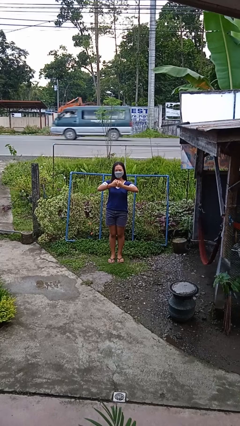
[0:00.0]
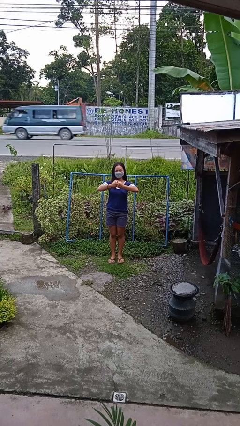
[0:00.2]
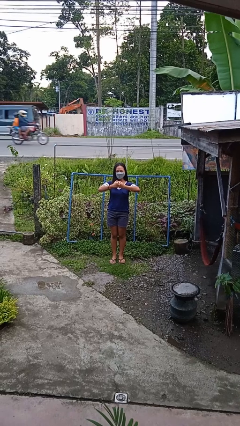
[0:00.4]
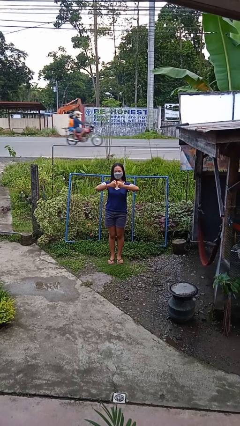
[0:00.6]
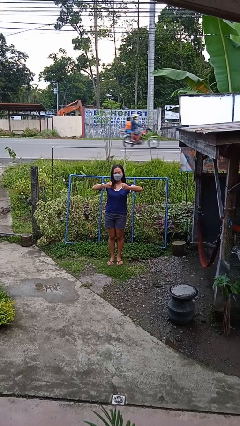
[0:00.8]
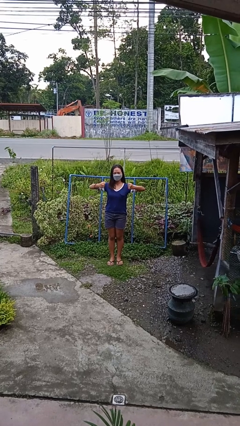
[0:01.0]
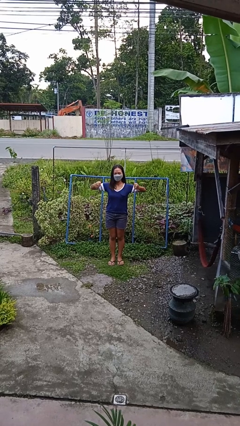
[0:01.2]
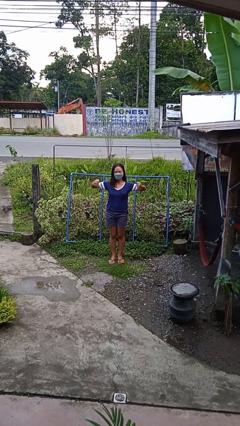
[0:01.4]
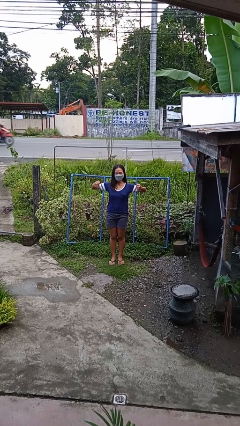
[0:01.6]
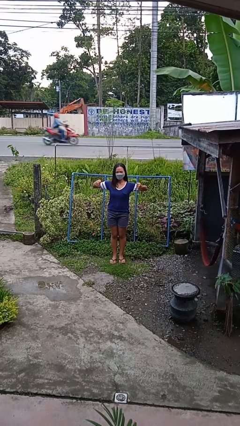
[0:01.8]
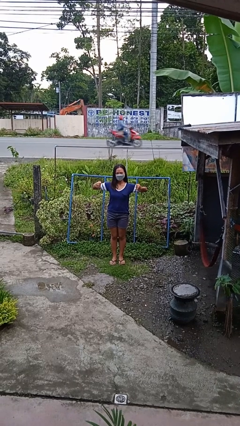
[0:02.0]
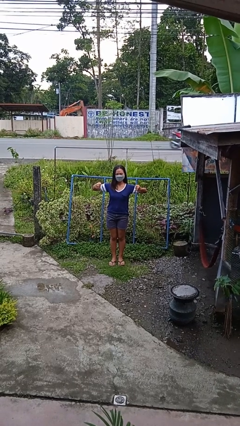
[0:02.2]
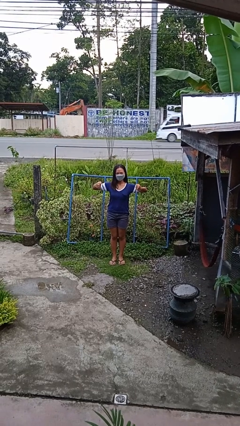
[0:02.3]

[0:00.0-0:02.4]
person gestures zoom in

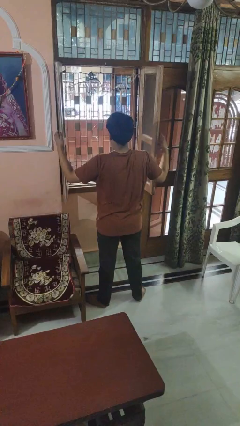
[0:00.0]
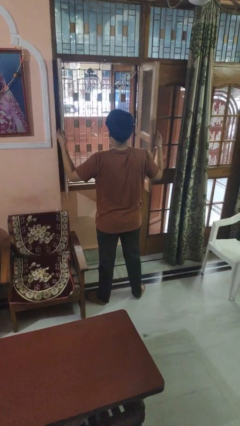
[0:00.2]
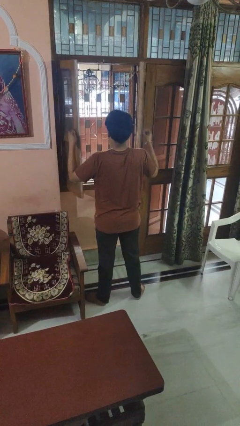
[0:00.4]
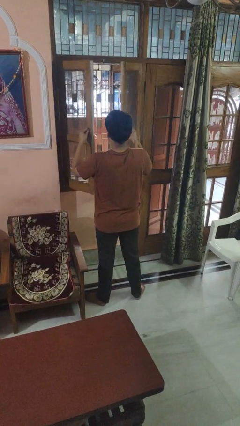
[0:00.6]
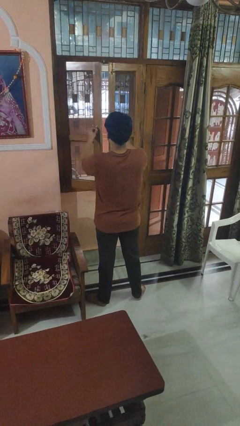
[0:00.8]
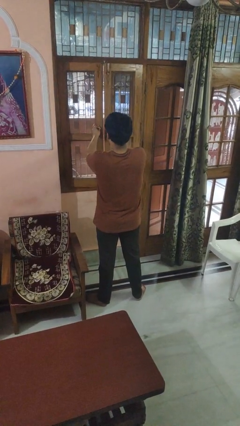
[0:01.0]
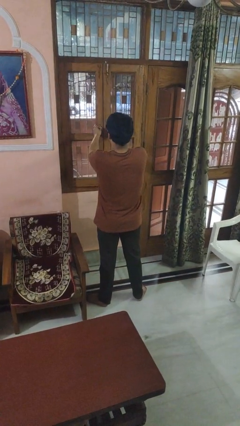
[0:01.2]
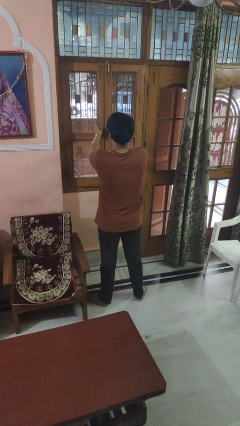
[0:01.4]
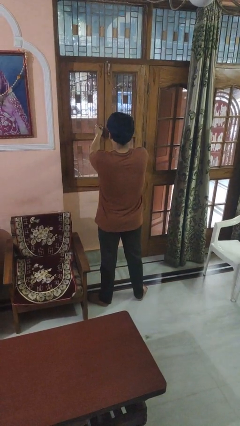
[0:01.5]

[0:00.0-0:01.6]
person closes home window

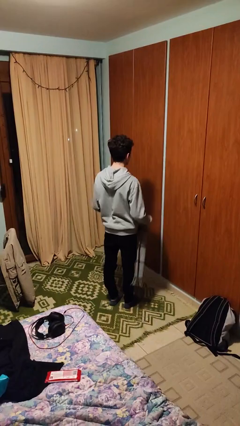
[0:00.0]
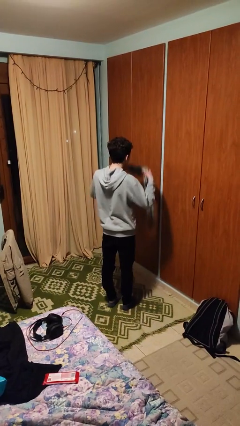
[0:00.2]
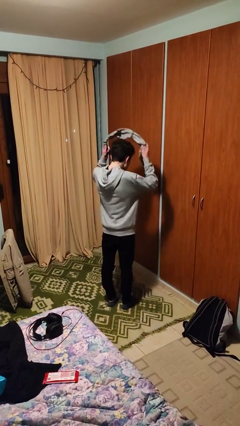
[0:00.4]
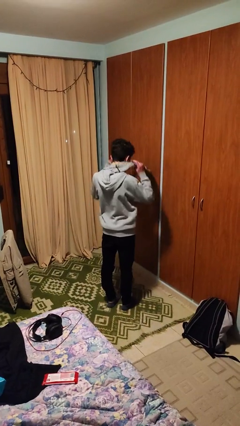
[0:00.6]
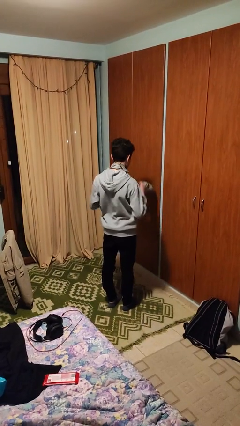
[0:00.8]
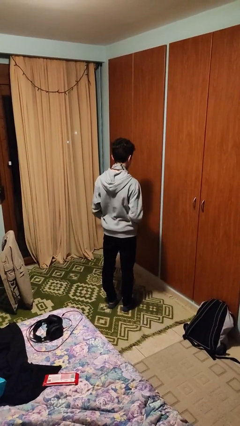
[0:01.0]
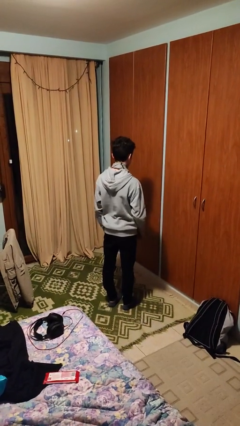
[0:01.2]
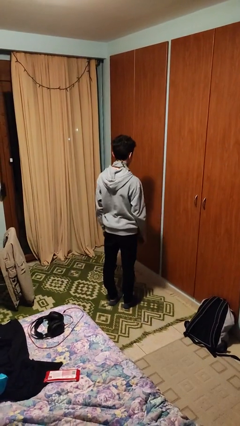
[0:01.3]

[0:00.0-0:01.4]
person puts on scarf

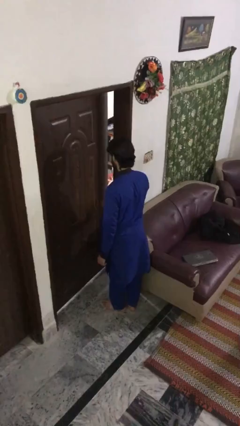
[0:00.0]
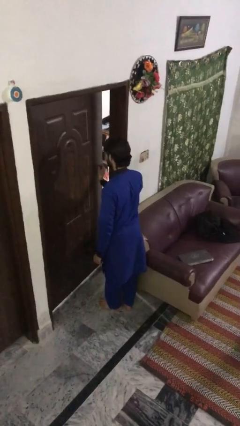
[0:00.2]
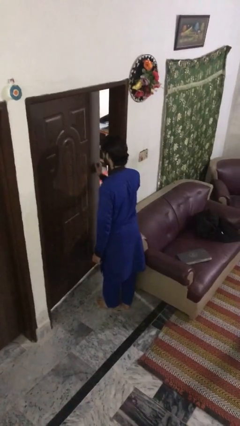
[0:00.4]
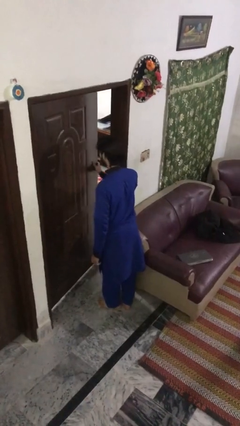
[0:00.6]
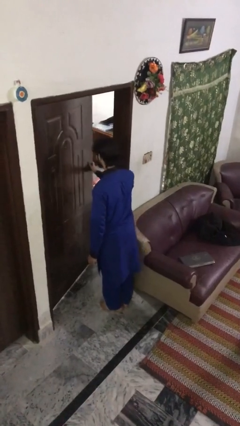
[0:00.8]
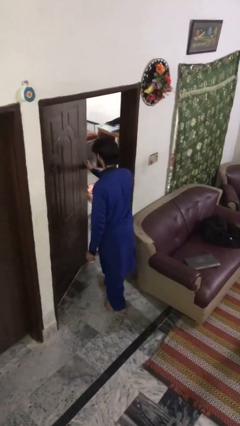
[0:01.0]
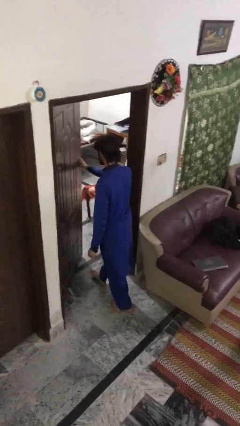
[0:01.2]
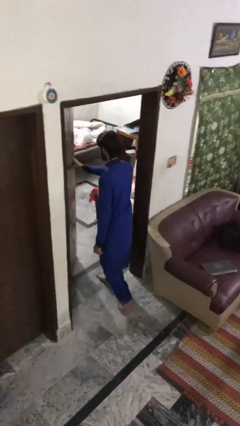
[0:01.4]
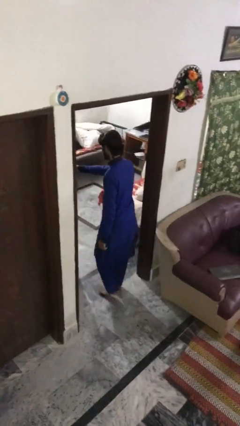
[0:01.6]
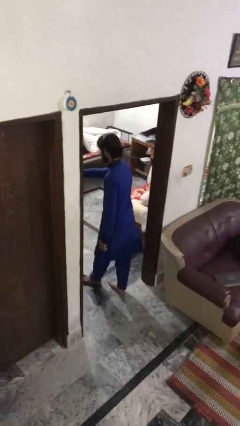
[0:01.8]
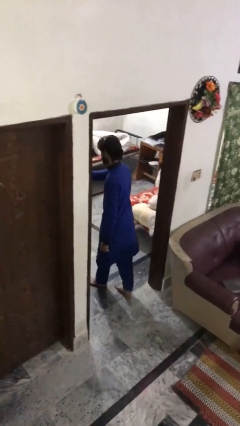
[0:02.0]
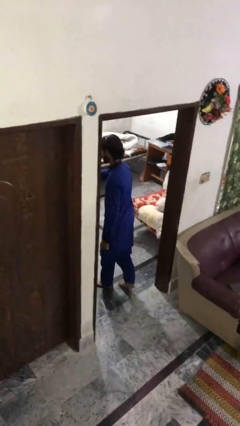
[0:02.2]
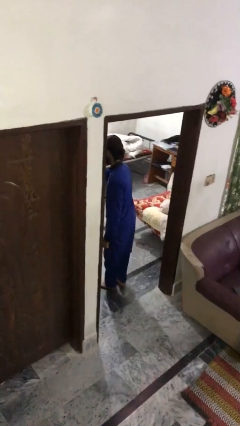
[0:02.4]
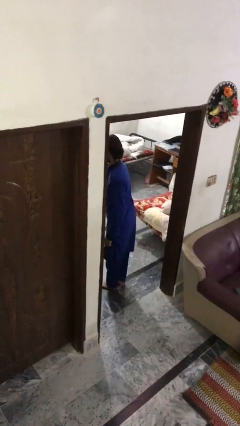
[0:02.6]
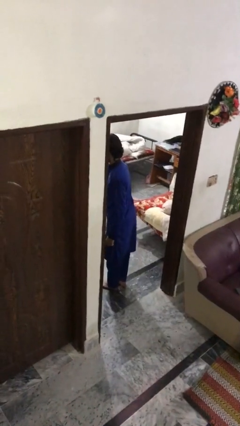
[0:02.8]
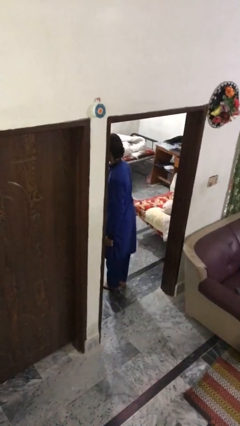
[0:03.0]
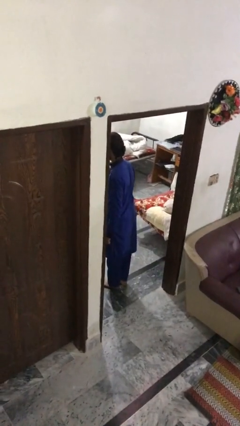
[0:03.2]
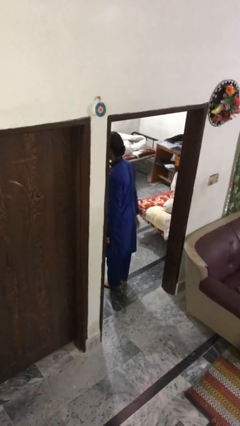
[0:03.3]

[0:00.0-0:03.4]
person opens facility door

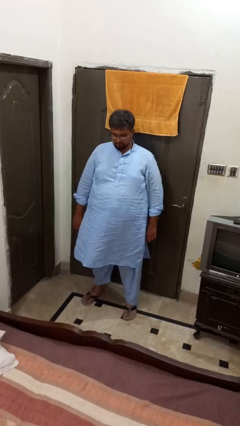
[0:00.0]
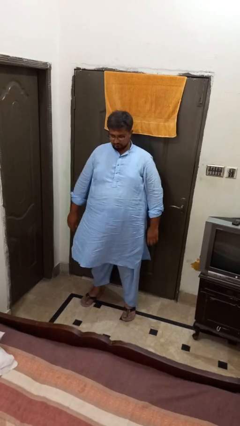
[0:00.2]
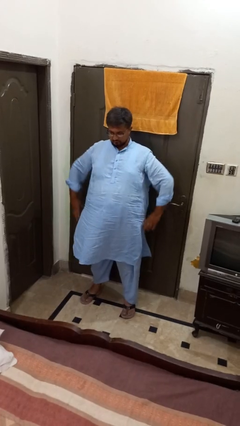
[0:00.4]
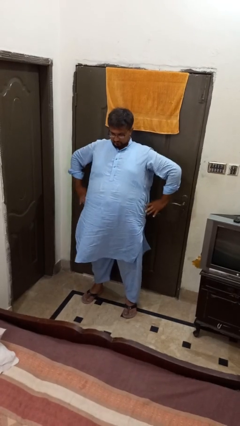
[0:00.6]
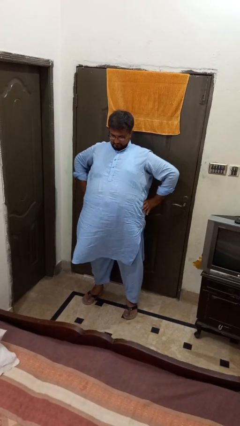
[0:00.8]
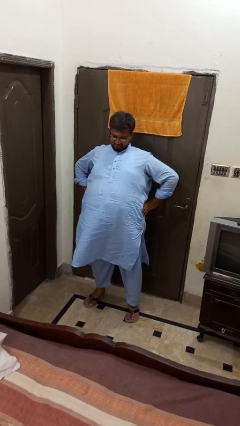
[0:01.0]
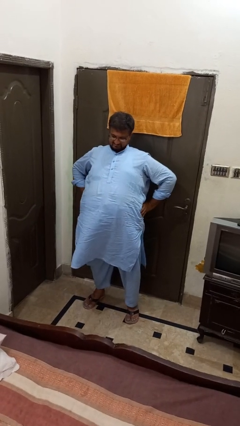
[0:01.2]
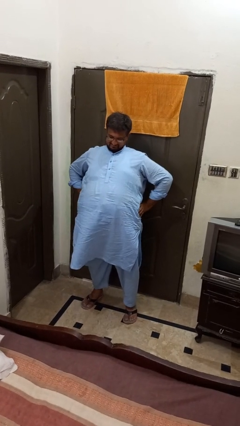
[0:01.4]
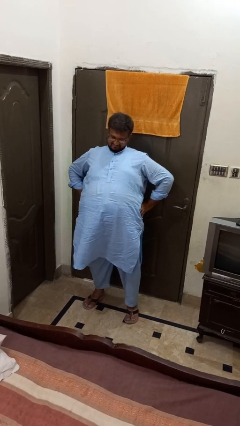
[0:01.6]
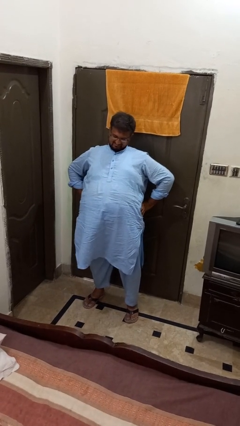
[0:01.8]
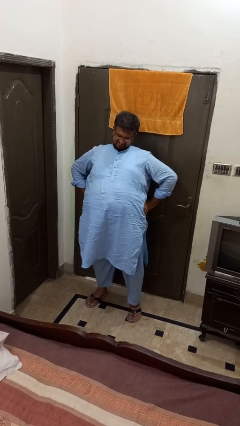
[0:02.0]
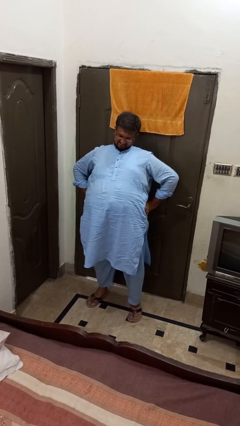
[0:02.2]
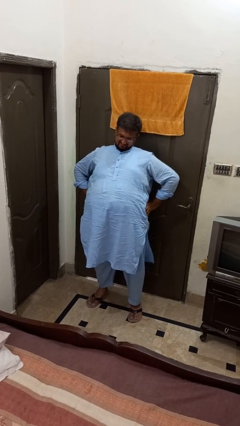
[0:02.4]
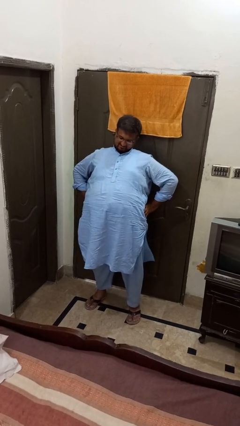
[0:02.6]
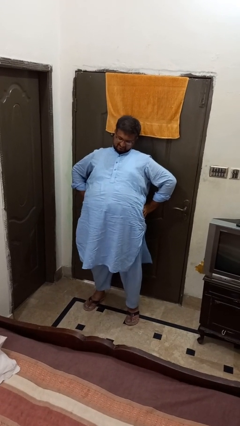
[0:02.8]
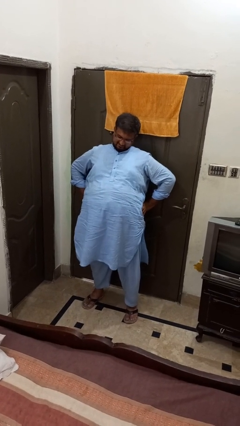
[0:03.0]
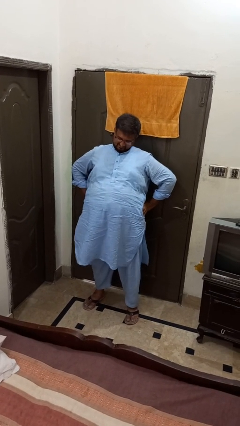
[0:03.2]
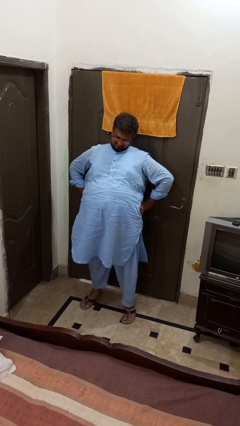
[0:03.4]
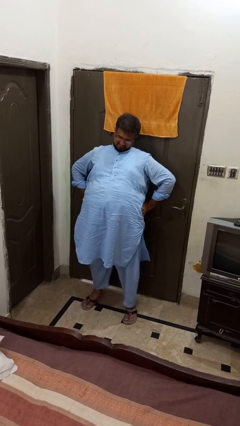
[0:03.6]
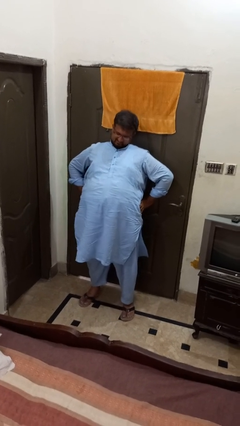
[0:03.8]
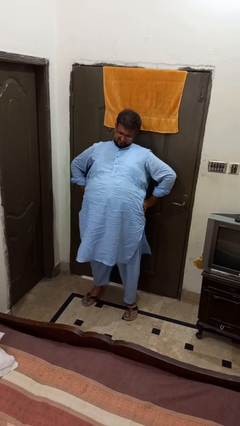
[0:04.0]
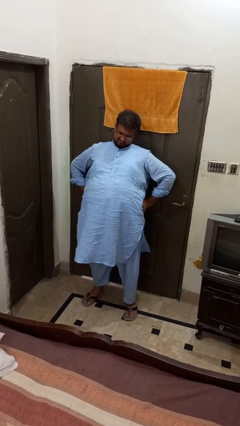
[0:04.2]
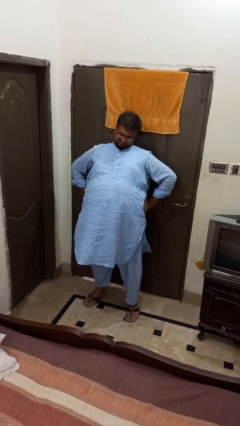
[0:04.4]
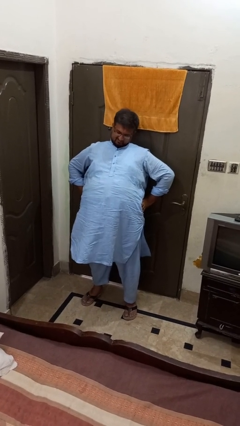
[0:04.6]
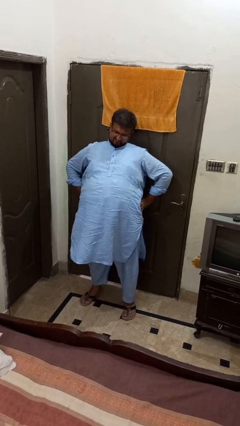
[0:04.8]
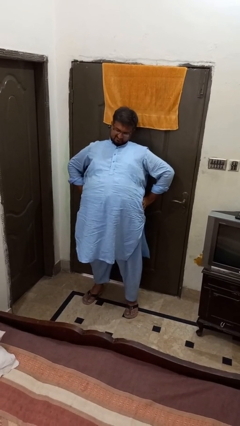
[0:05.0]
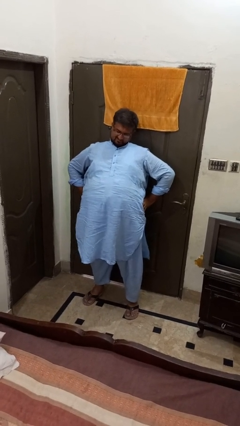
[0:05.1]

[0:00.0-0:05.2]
person stretches back

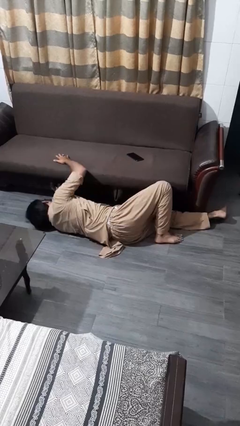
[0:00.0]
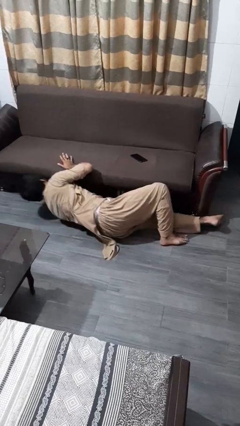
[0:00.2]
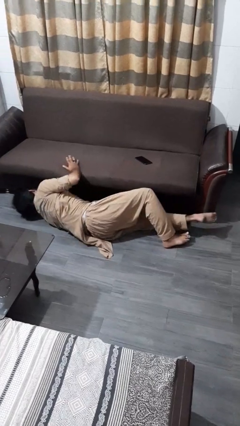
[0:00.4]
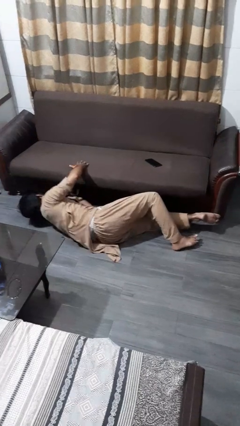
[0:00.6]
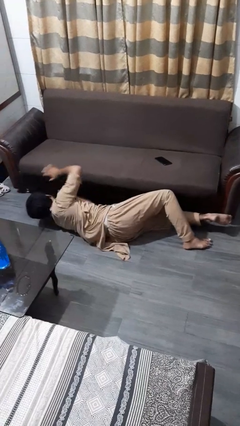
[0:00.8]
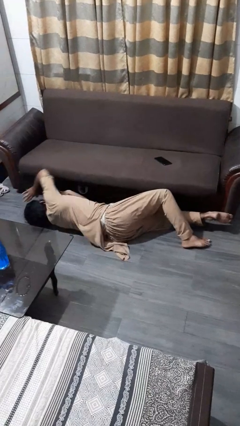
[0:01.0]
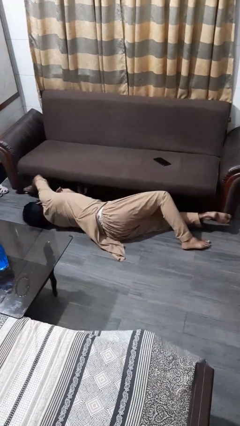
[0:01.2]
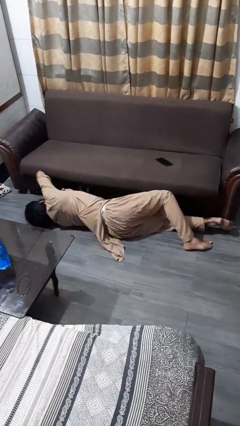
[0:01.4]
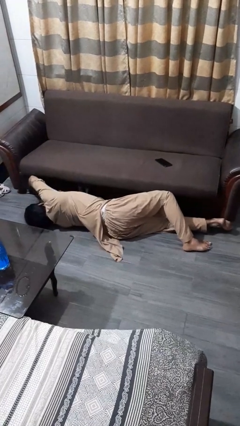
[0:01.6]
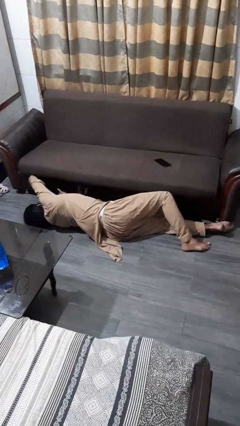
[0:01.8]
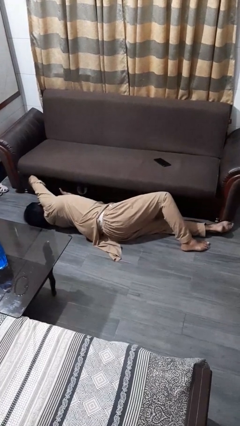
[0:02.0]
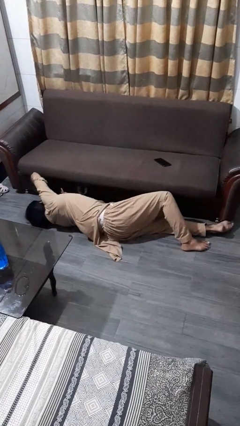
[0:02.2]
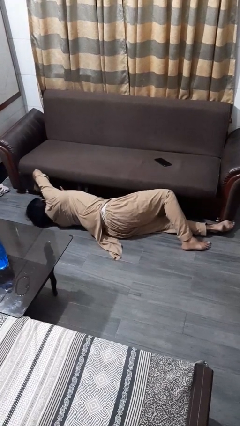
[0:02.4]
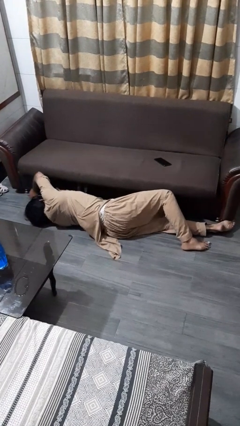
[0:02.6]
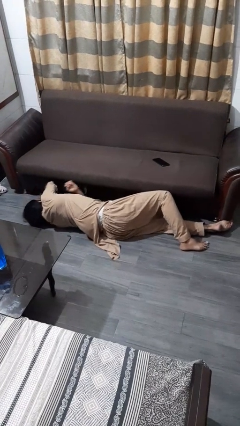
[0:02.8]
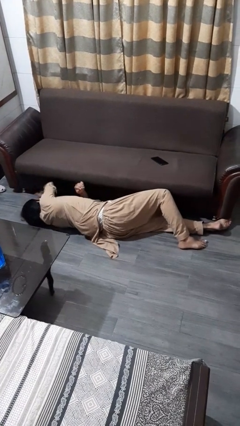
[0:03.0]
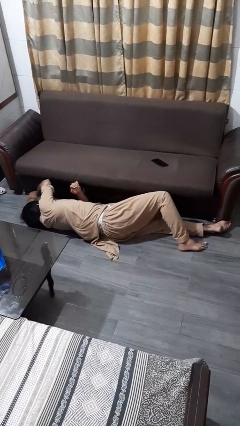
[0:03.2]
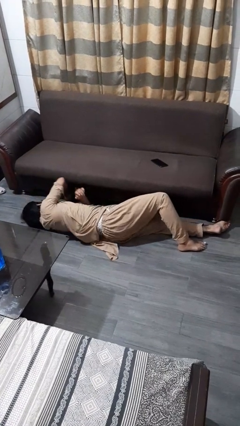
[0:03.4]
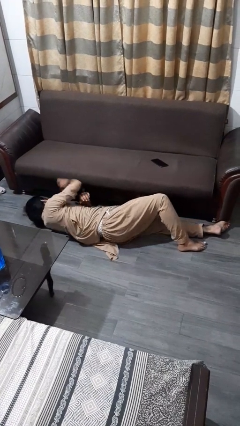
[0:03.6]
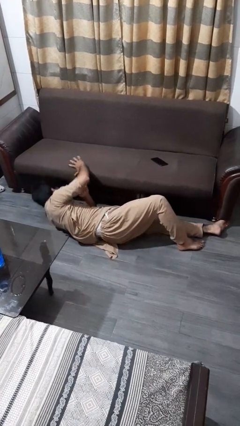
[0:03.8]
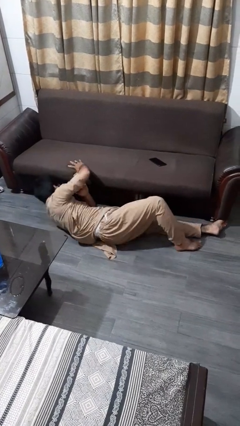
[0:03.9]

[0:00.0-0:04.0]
person searches under couch
